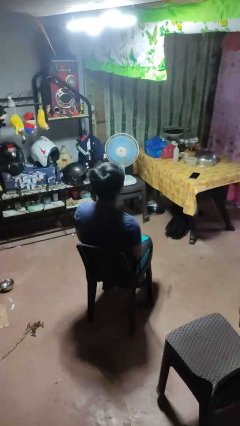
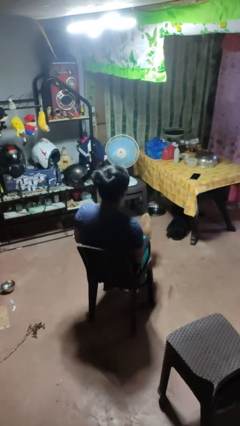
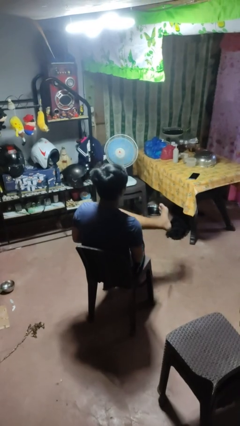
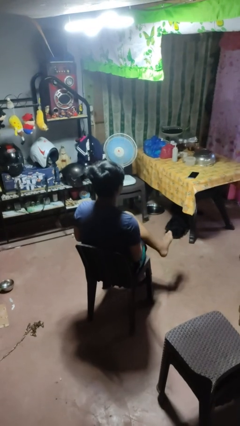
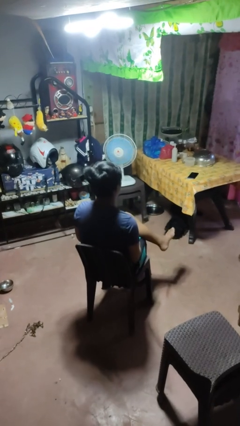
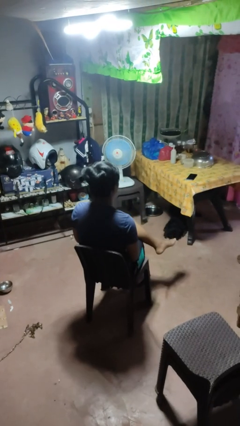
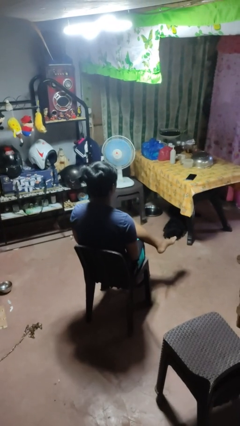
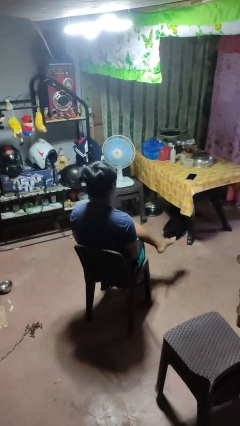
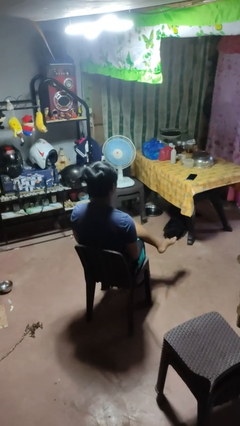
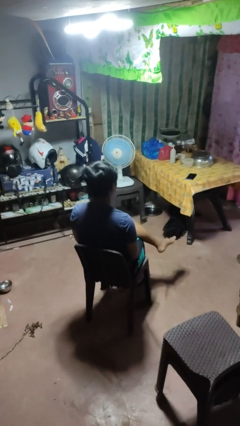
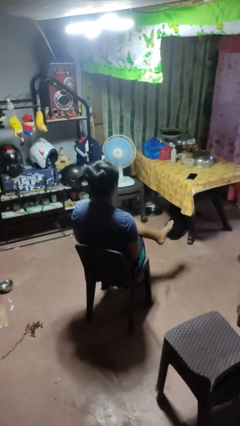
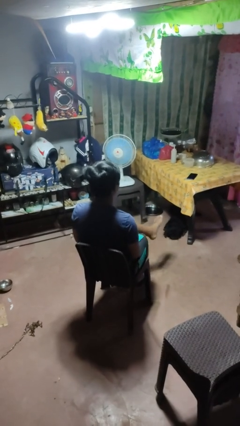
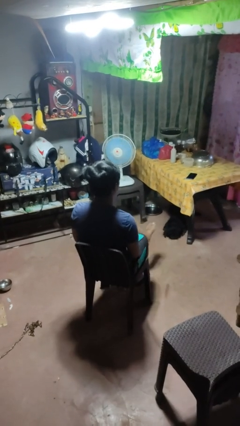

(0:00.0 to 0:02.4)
person crosses legs

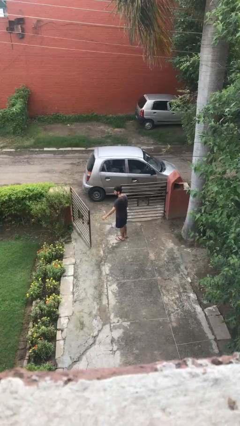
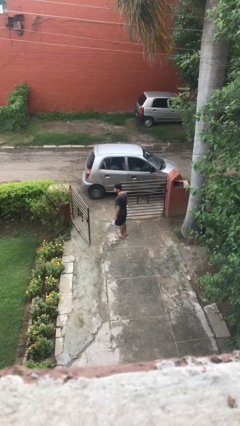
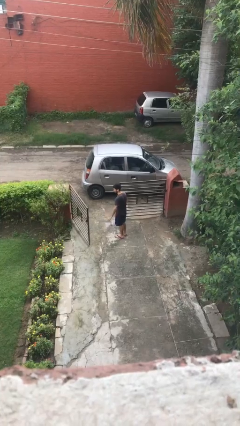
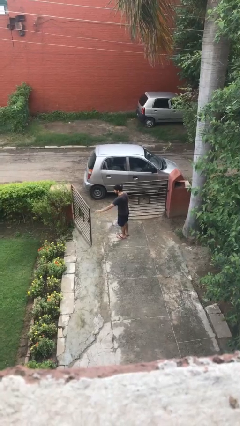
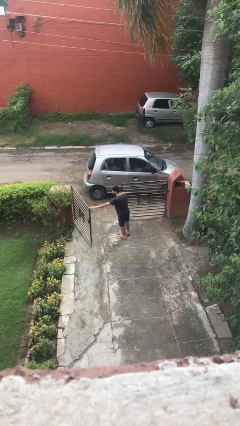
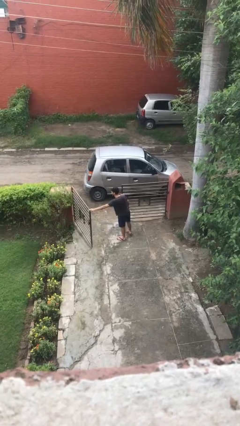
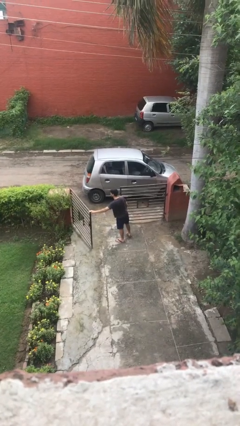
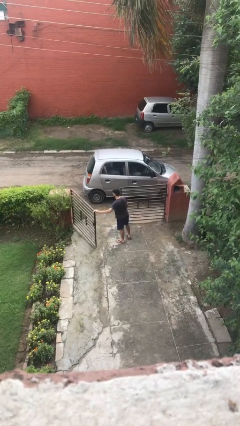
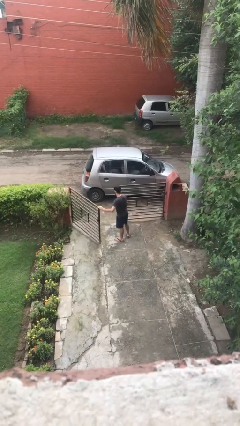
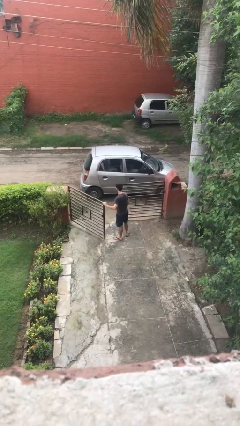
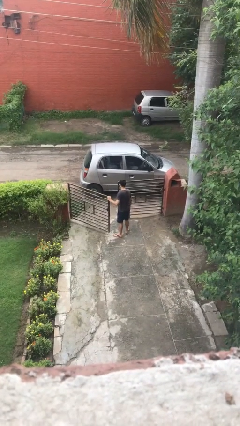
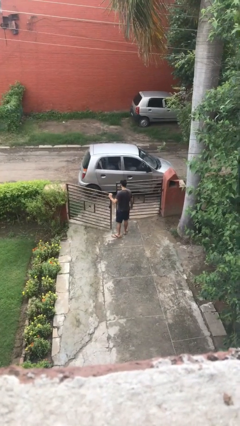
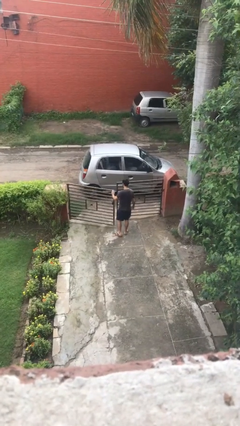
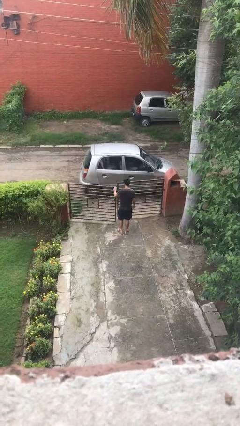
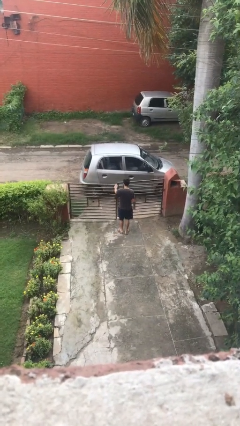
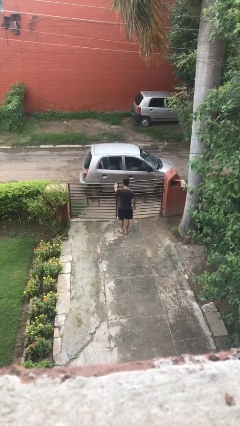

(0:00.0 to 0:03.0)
person closes gate

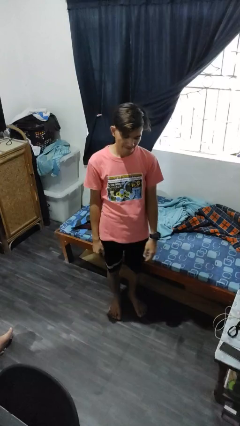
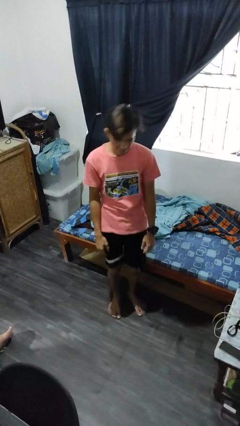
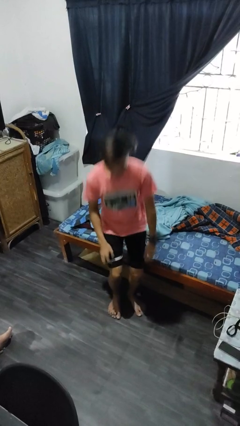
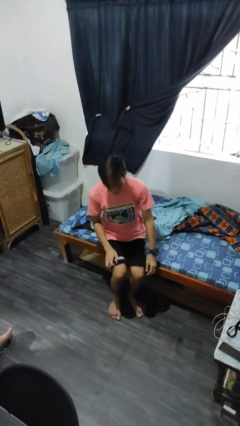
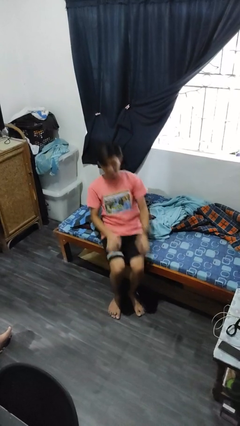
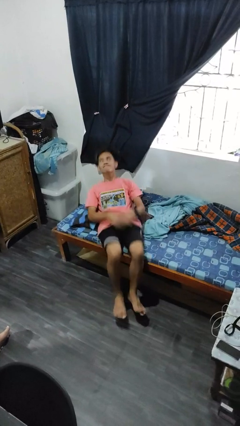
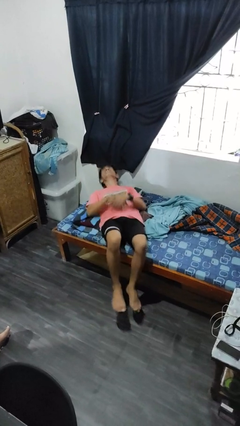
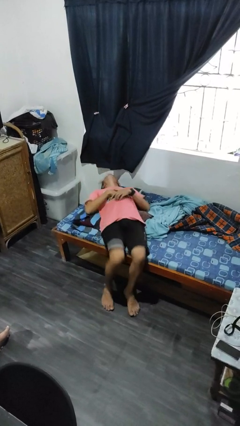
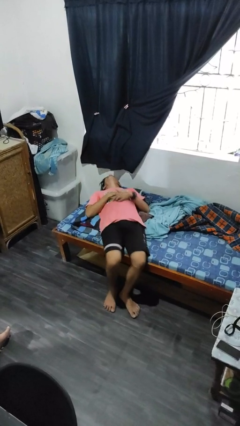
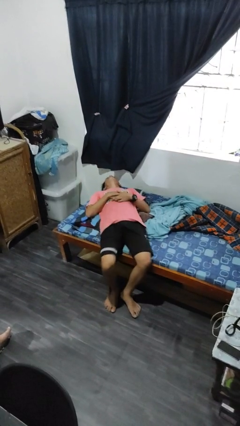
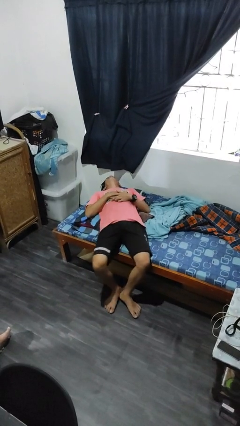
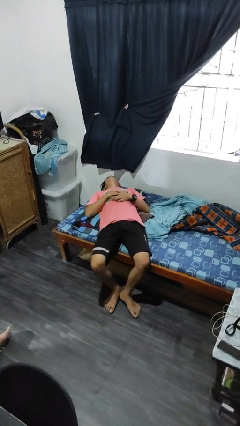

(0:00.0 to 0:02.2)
person lies down on bed

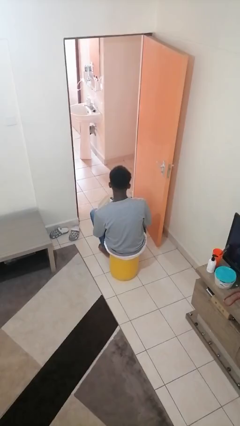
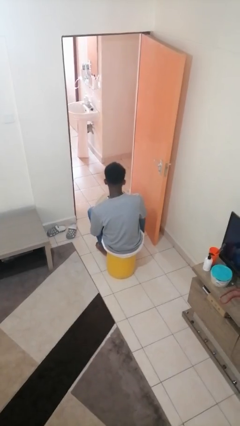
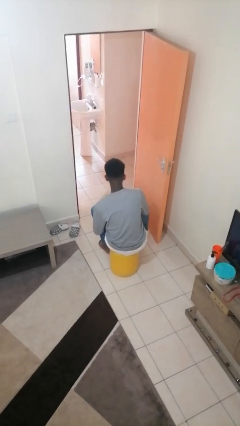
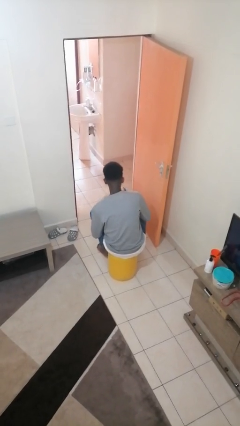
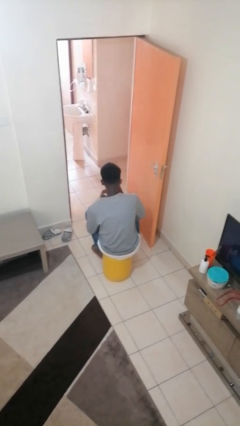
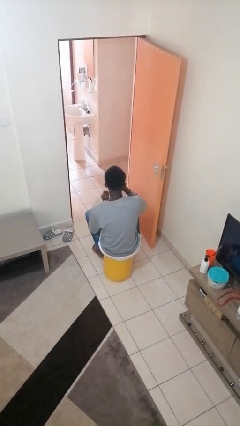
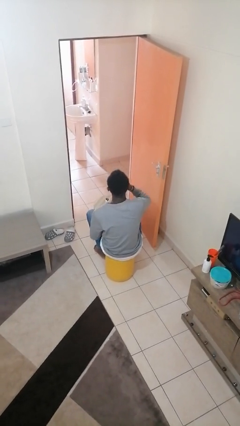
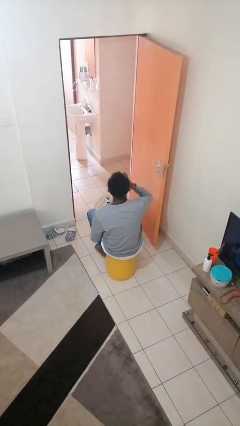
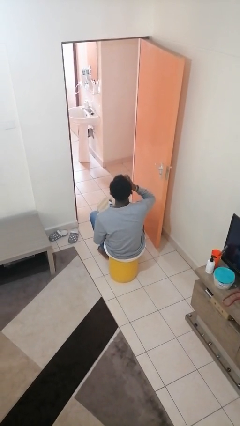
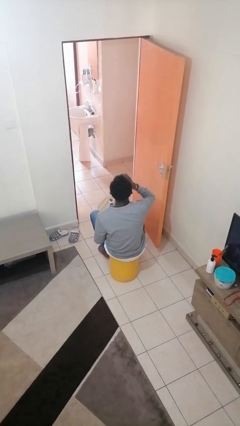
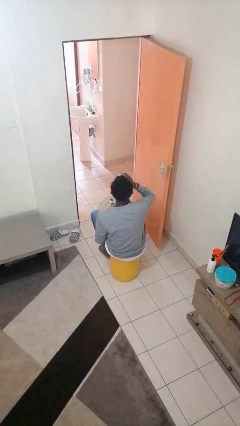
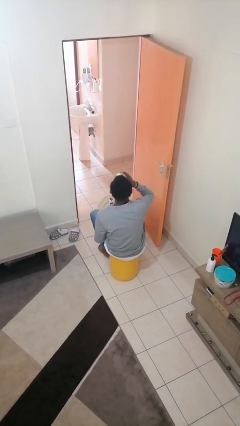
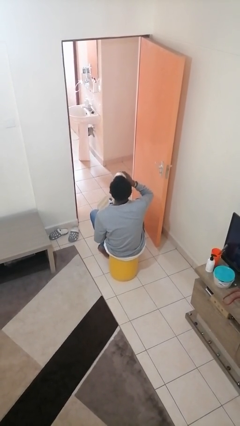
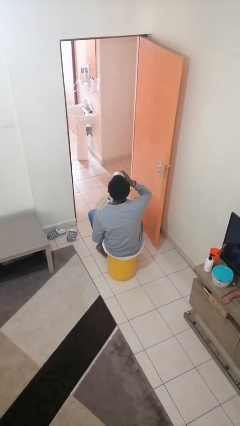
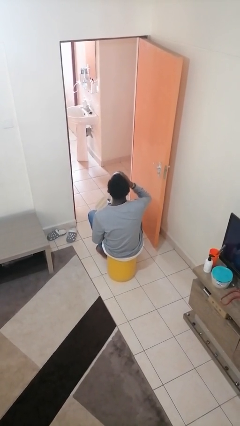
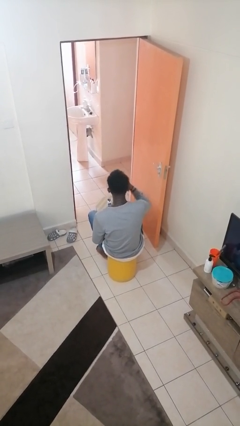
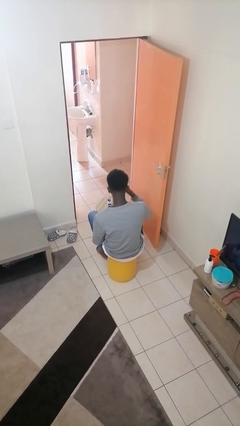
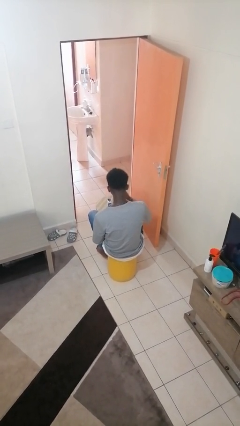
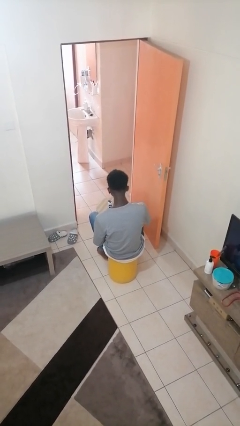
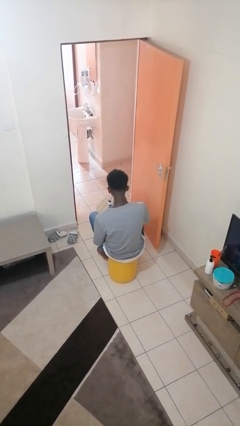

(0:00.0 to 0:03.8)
person drinks from cup

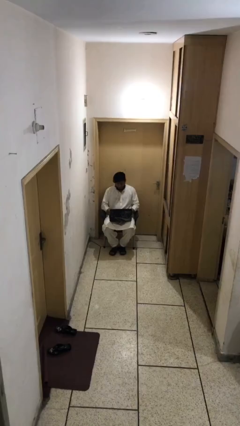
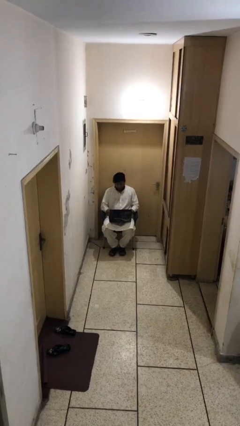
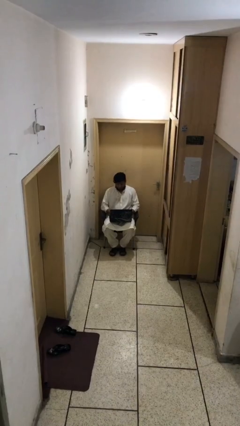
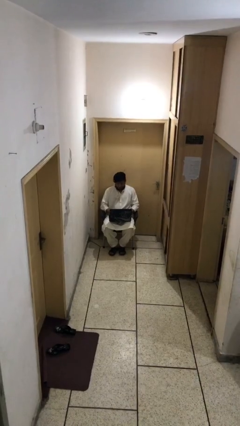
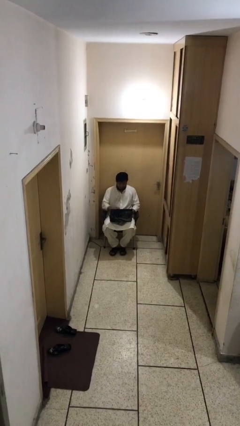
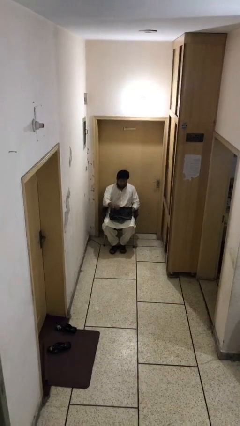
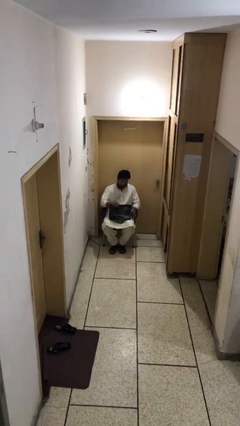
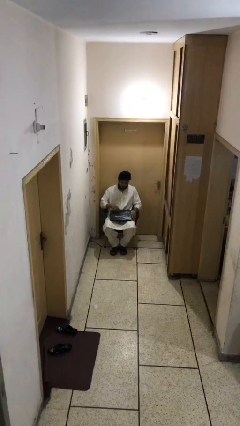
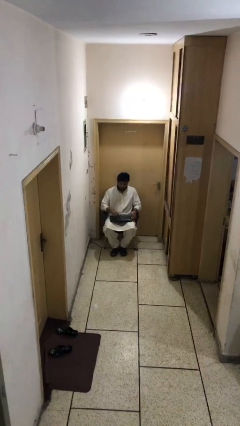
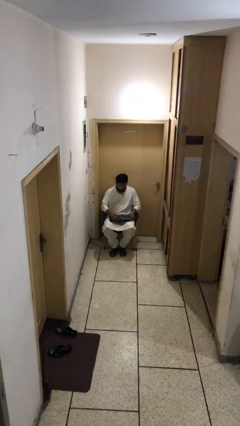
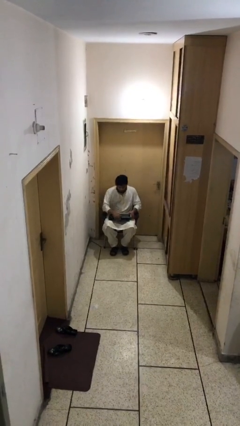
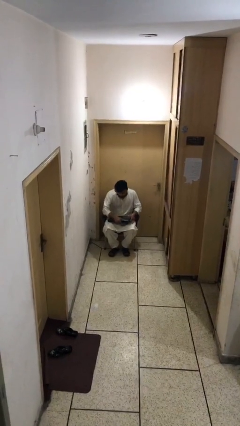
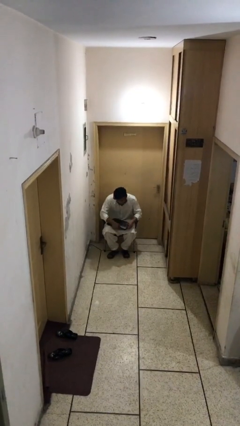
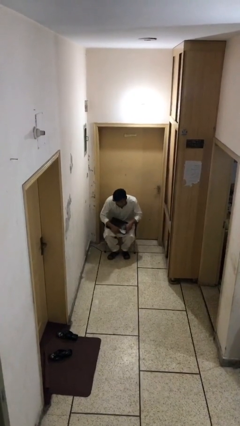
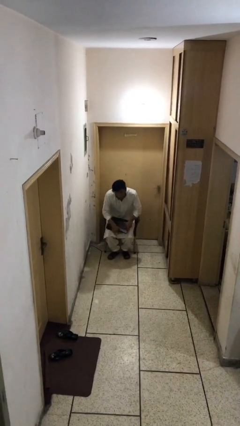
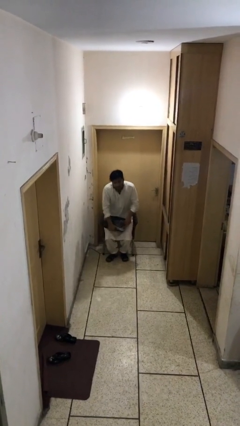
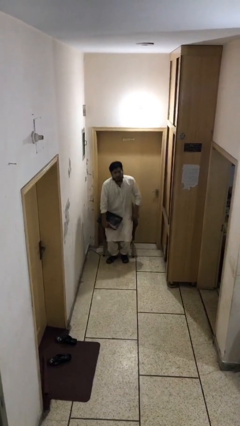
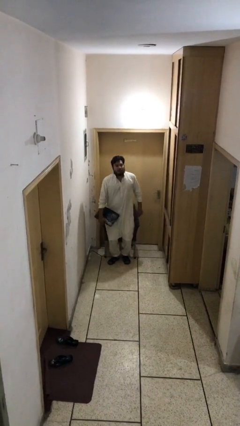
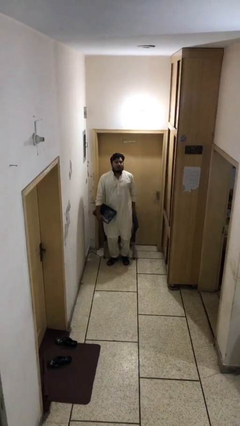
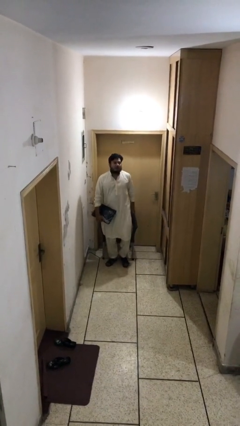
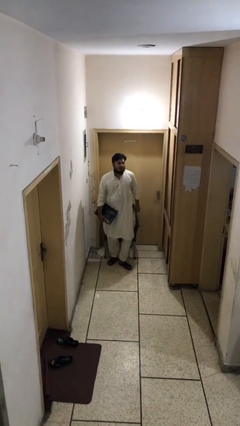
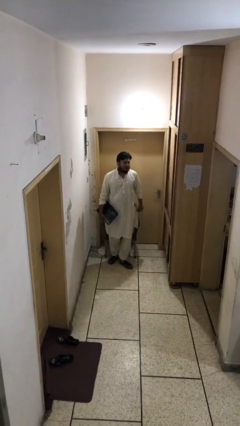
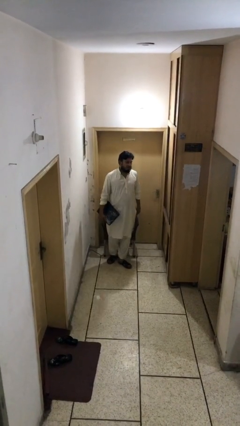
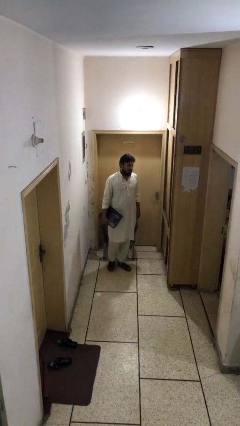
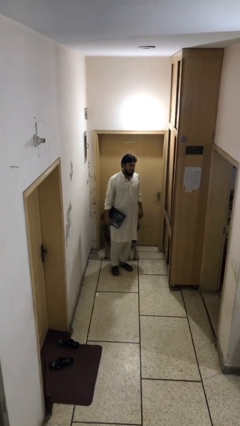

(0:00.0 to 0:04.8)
person stands up

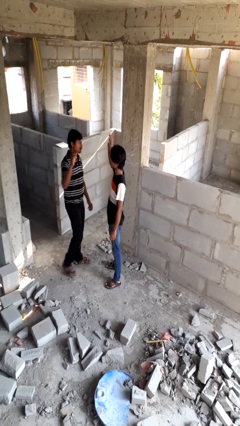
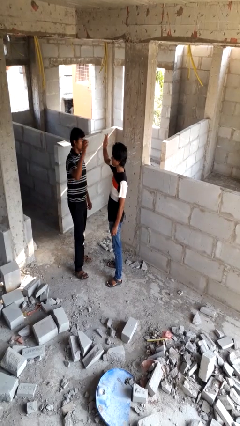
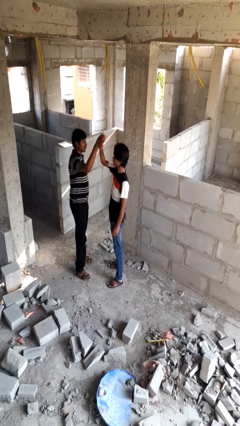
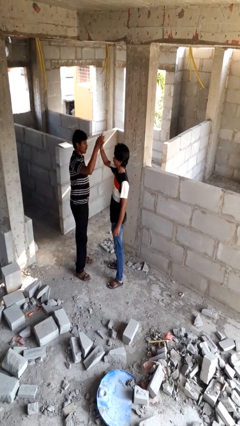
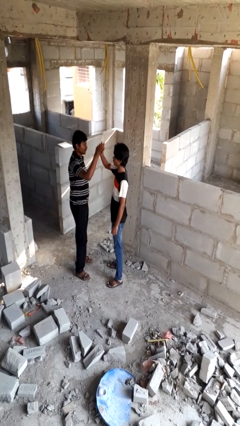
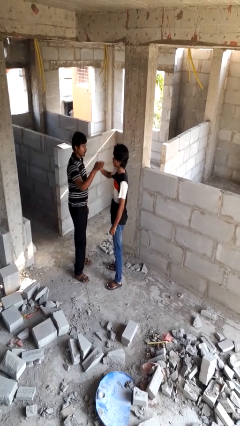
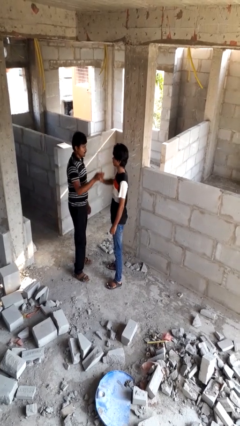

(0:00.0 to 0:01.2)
person highfives hand

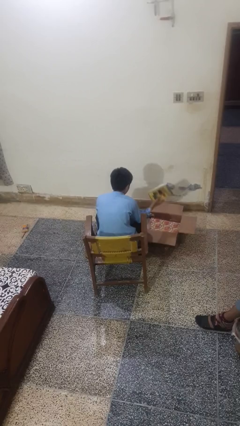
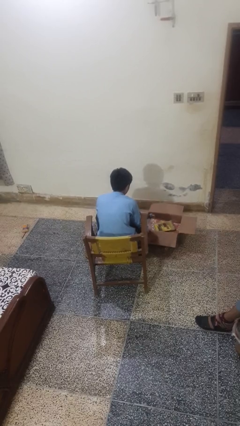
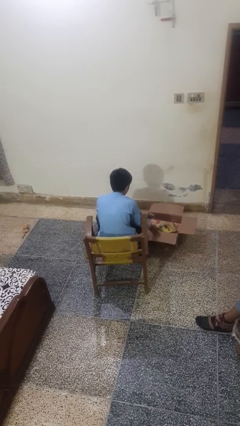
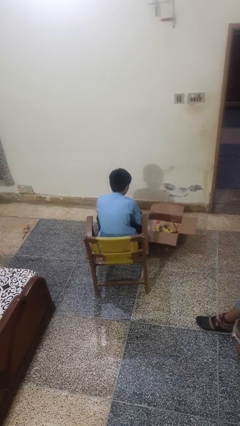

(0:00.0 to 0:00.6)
person puts object into box
